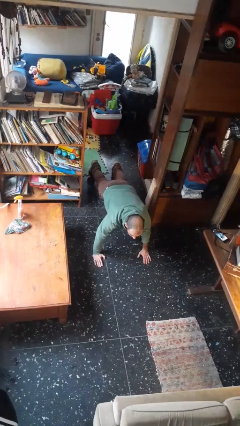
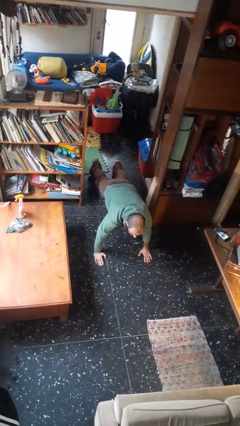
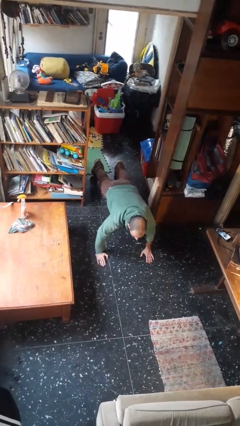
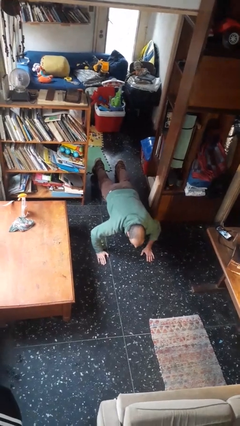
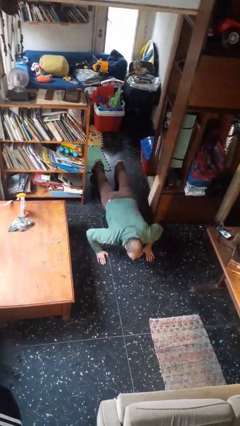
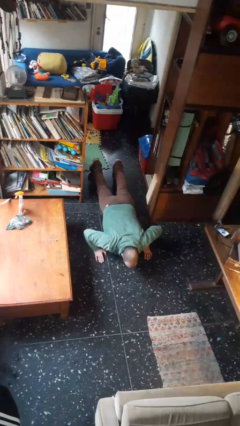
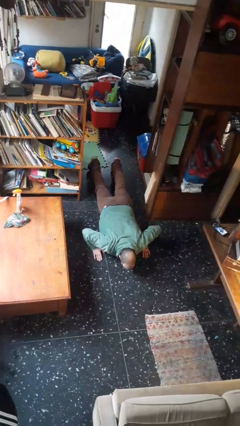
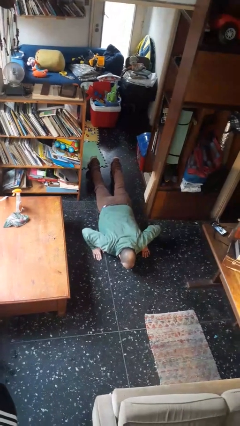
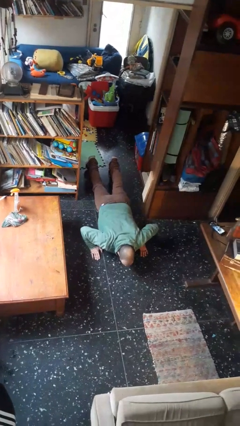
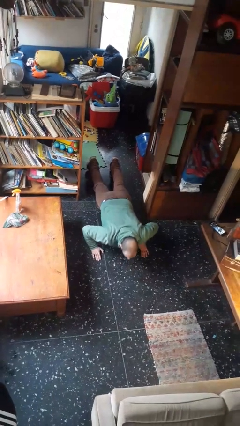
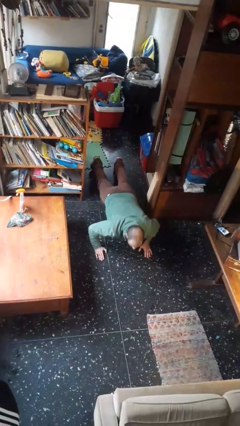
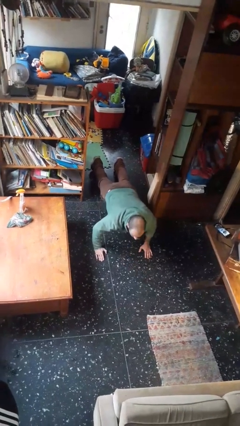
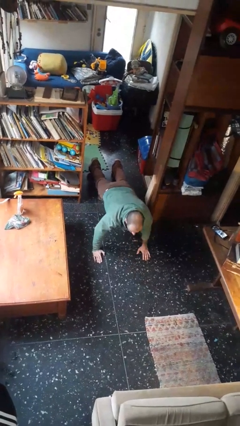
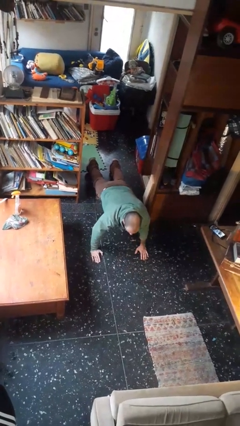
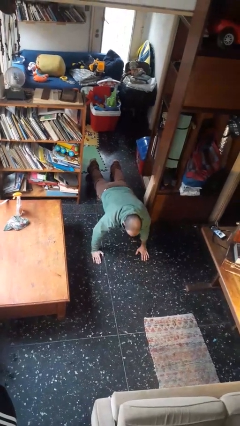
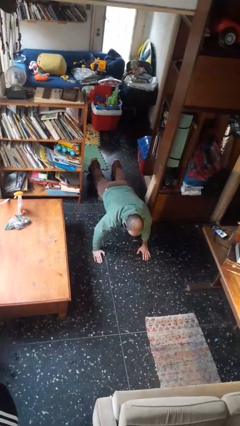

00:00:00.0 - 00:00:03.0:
person exercises with pushup

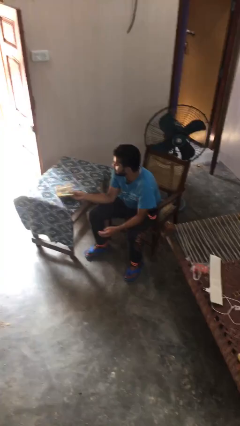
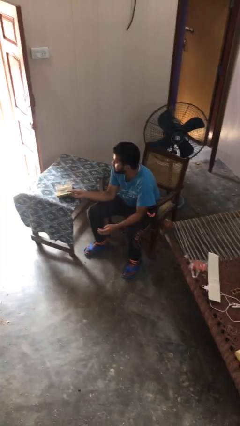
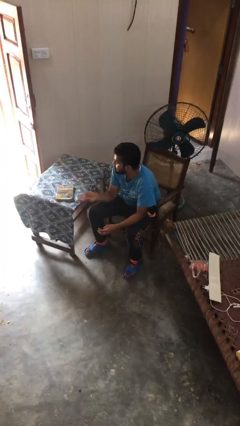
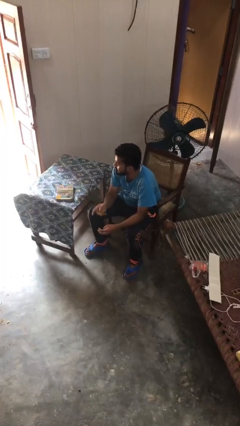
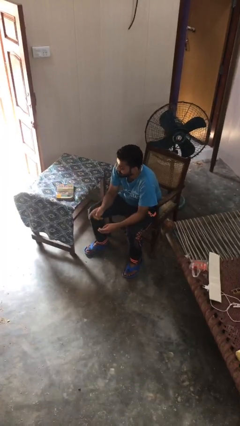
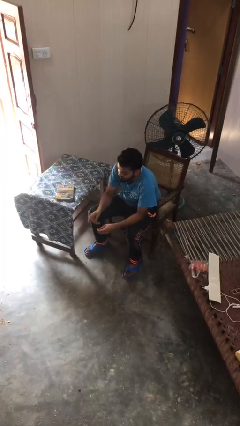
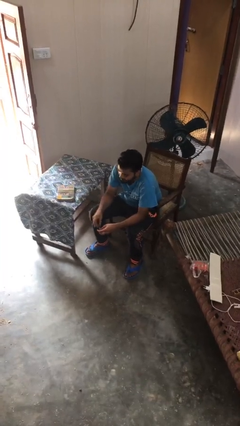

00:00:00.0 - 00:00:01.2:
person puts down object on table

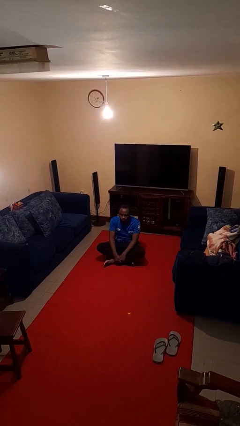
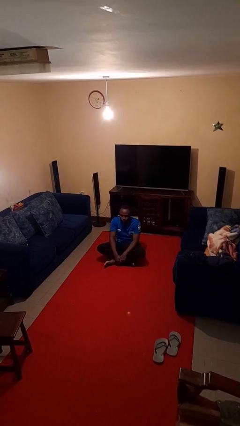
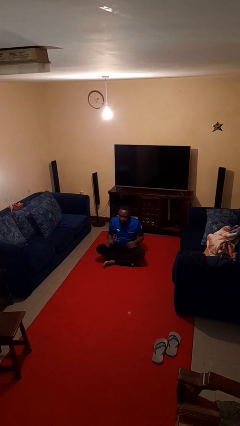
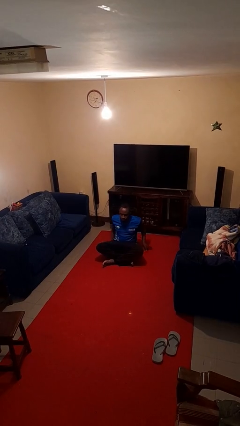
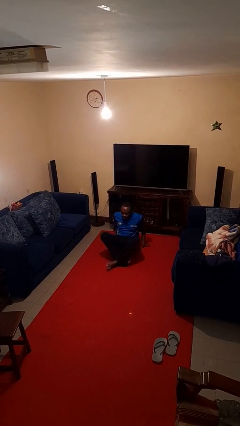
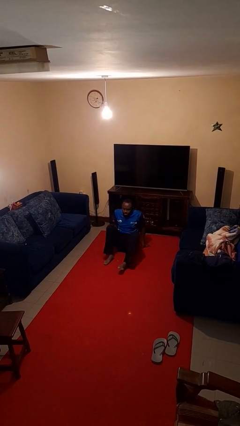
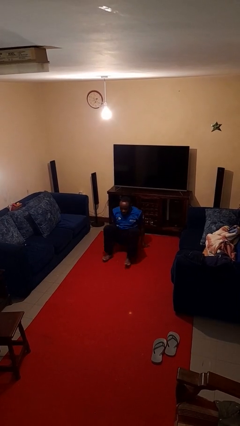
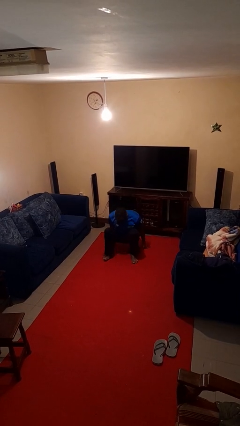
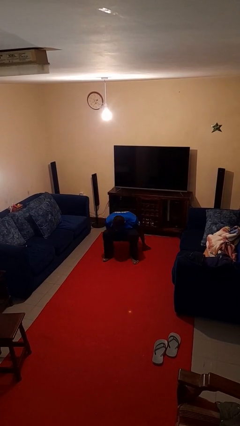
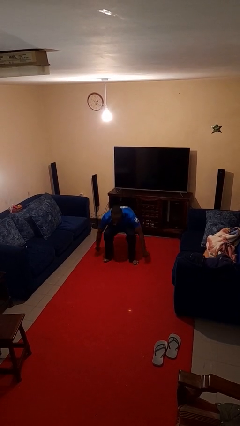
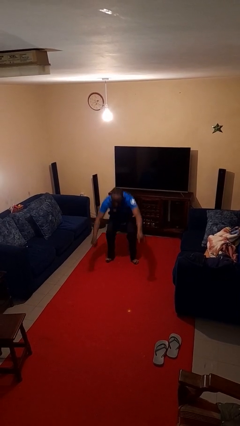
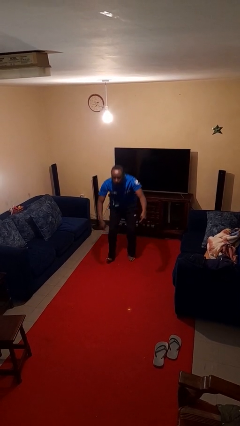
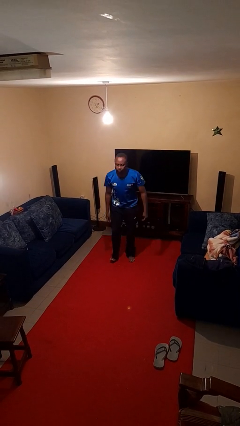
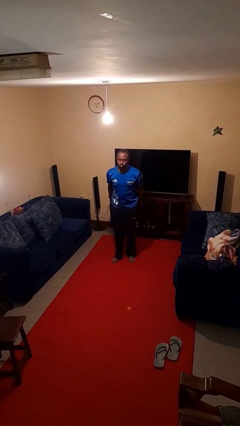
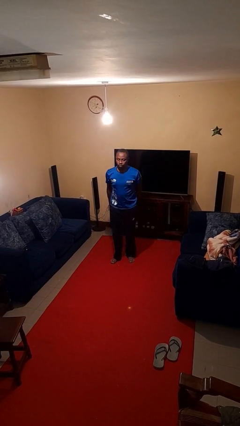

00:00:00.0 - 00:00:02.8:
person stands up from floor

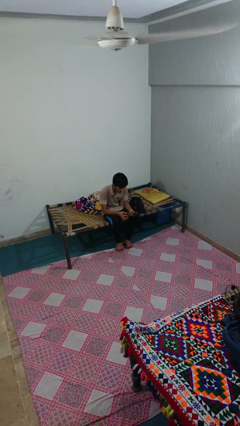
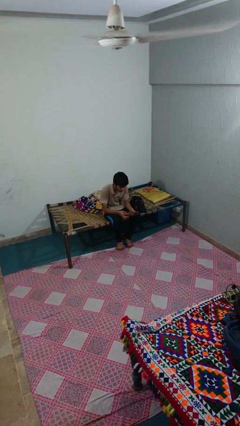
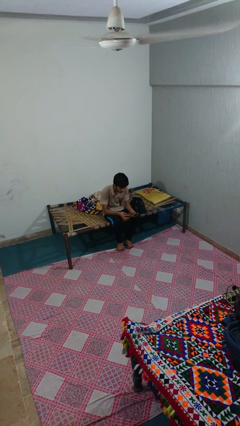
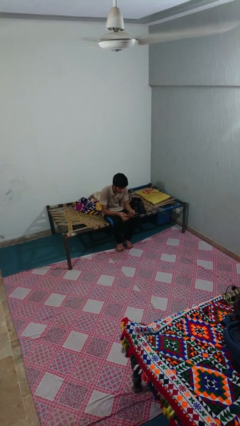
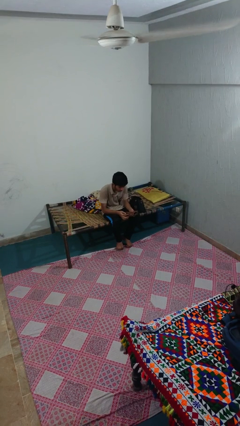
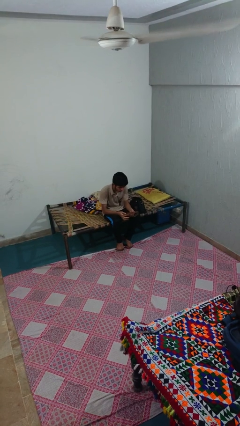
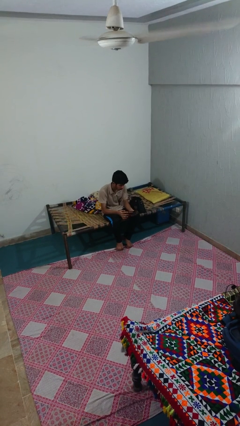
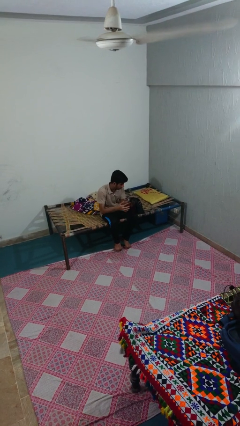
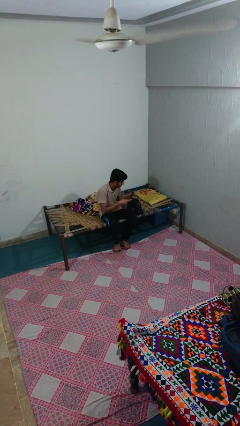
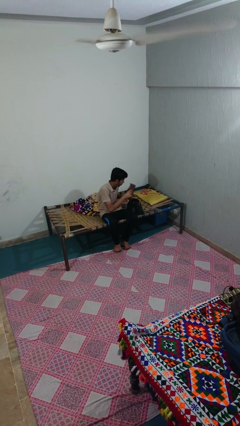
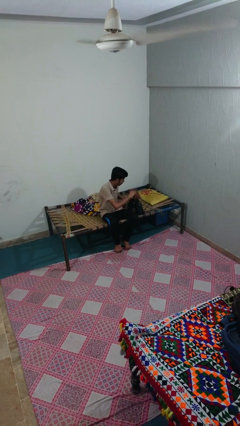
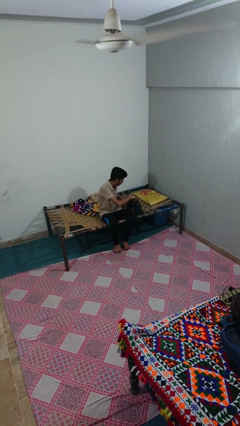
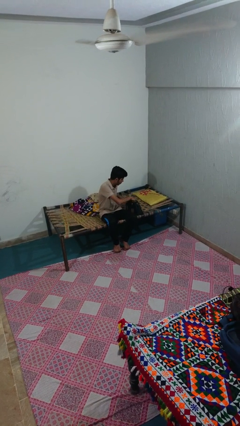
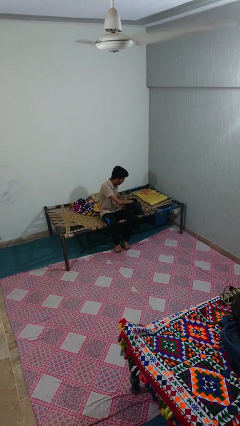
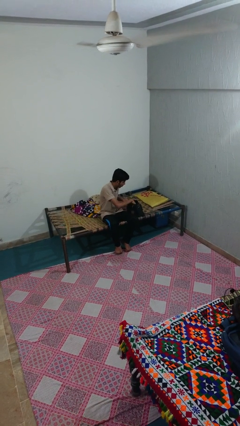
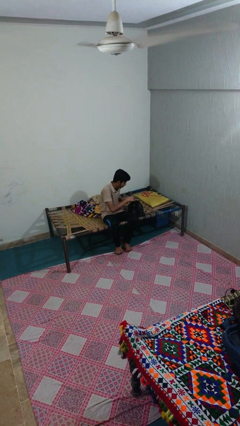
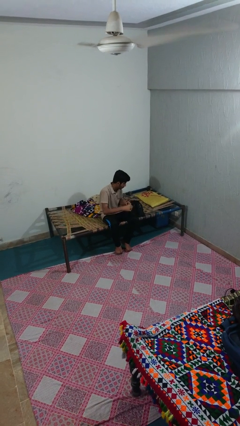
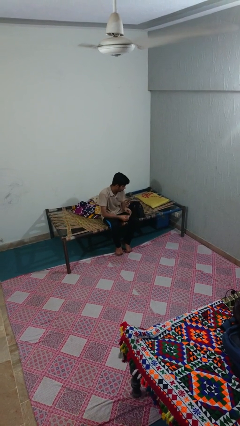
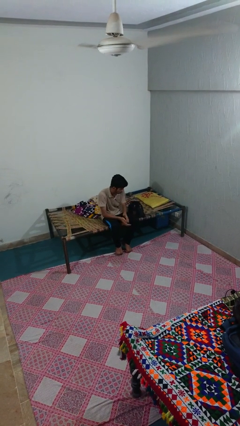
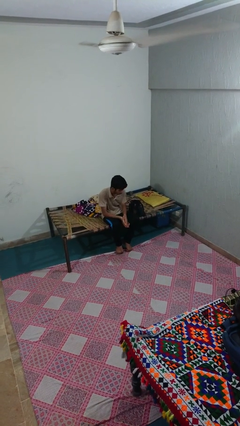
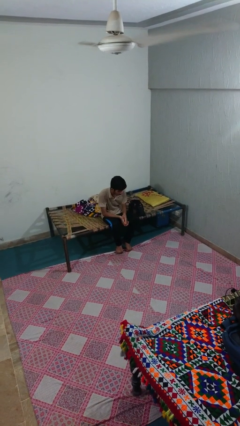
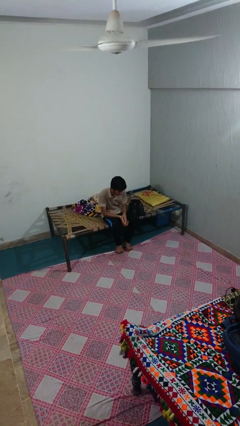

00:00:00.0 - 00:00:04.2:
person puts object into purse

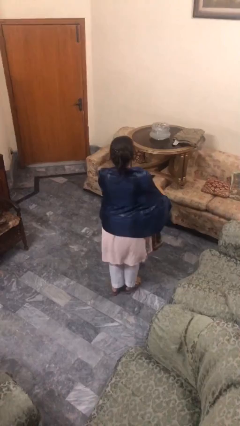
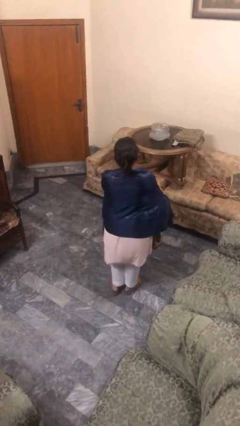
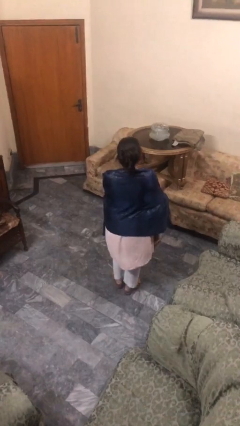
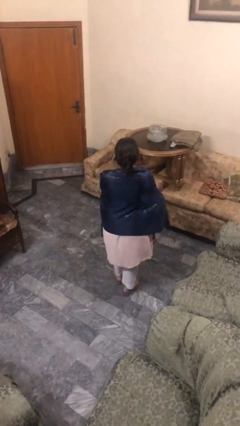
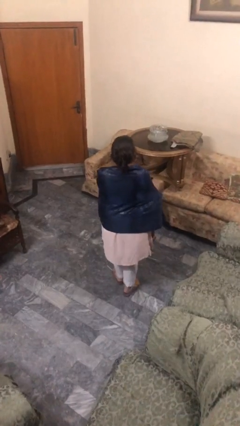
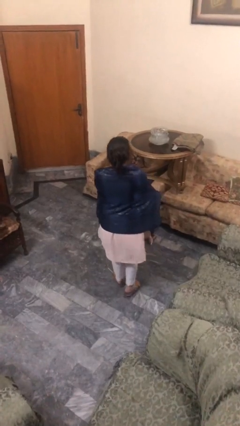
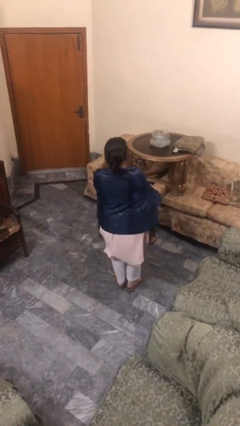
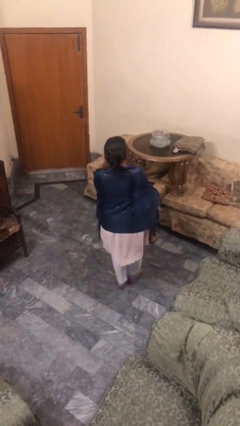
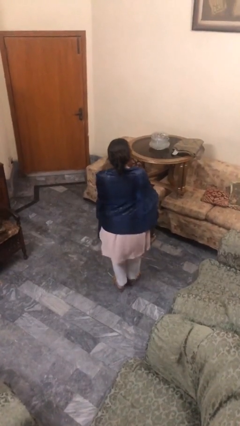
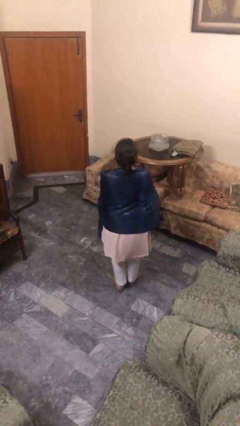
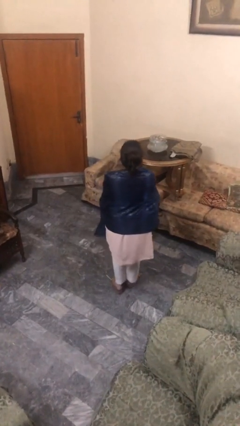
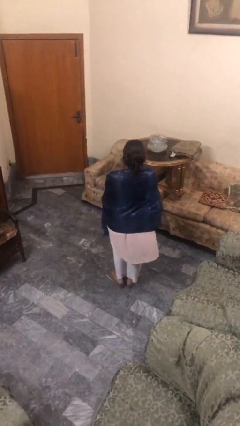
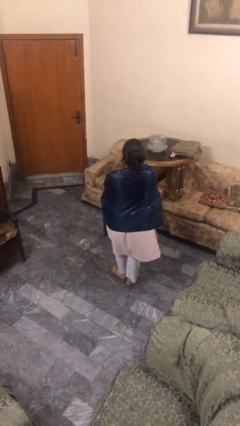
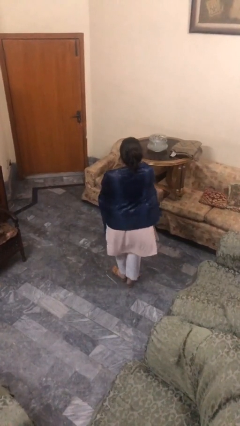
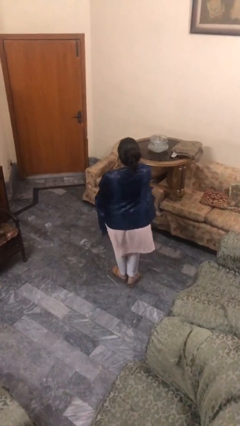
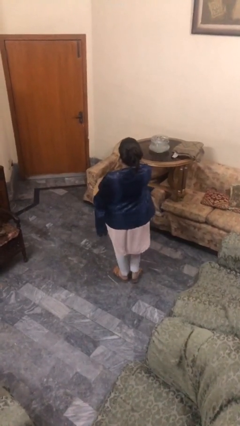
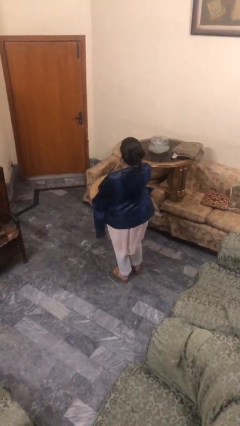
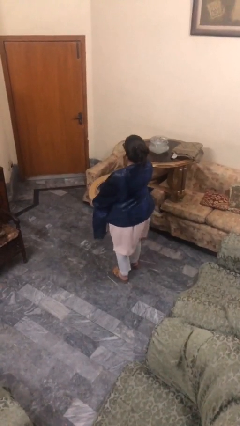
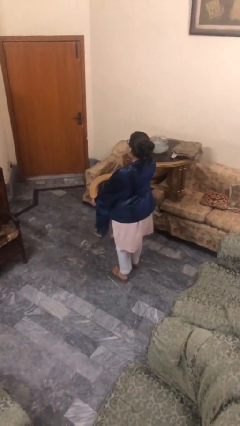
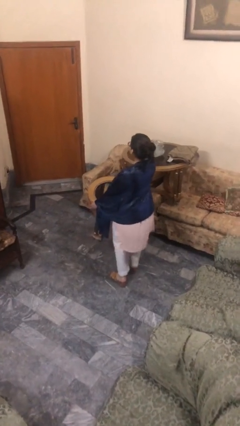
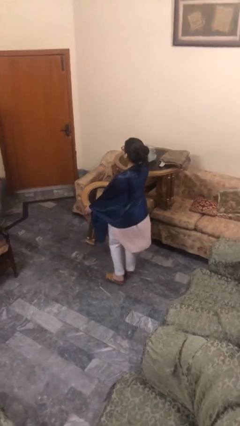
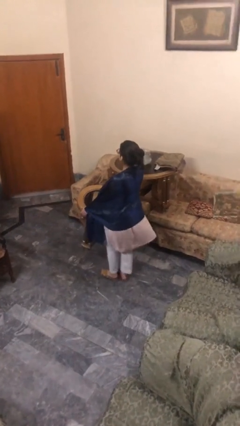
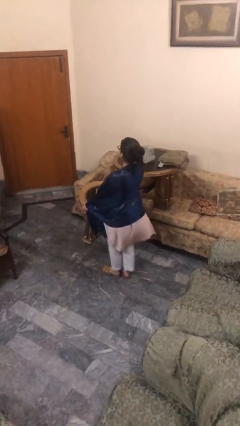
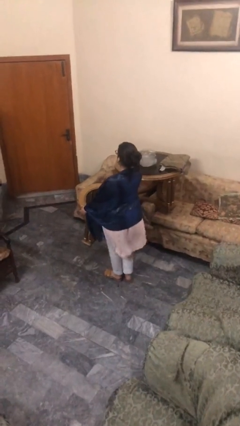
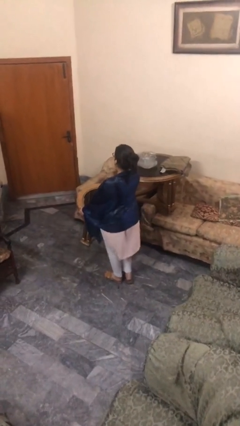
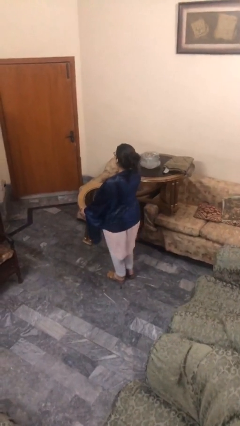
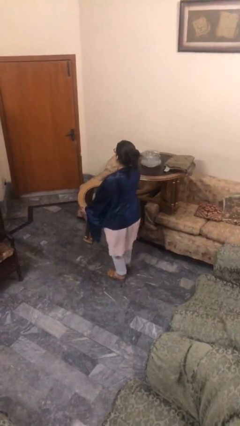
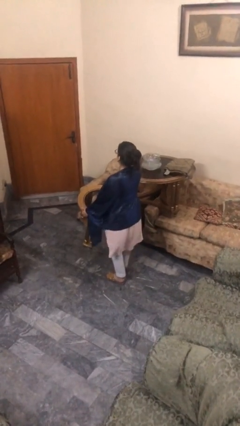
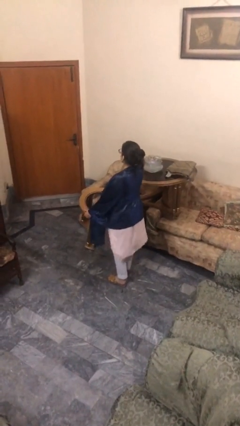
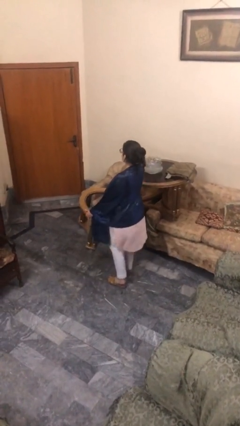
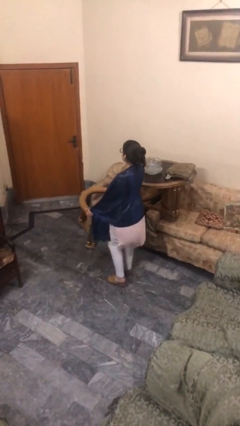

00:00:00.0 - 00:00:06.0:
person carries furniture
